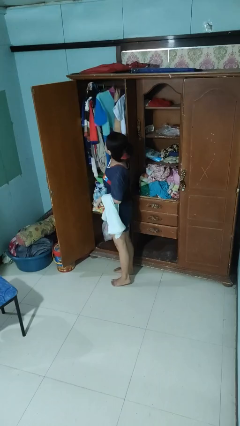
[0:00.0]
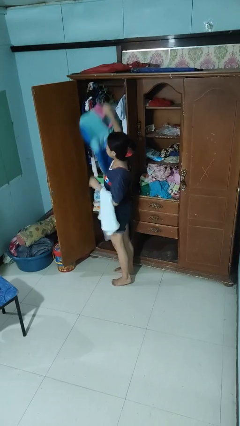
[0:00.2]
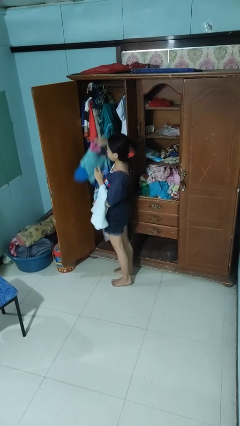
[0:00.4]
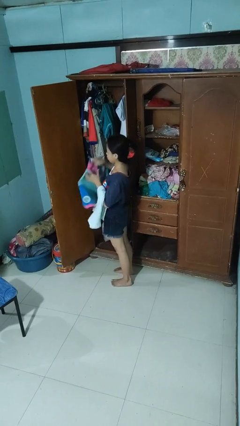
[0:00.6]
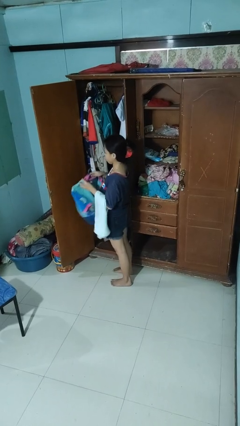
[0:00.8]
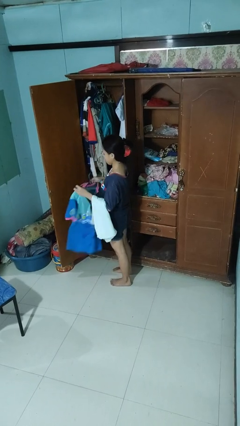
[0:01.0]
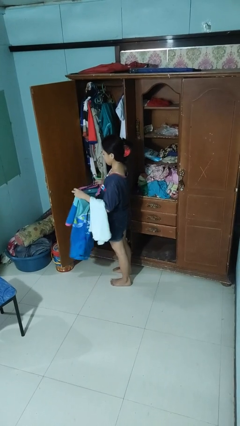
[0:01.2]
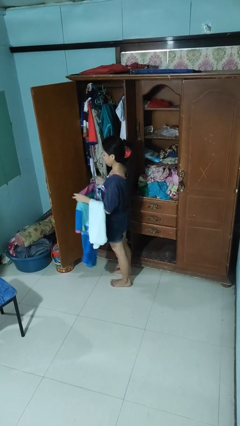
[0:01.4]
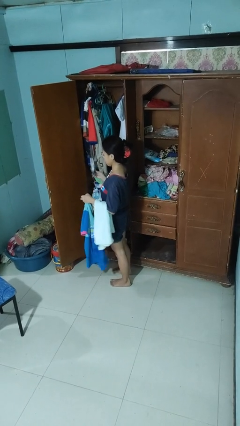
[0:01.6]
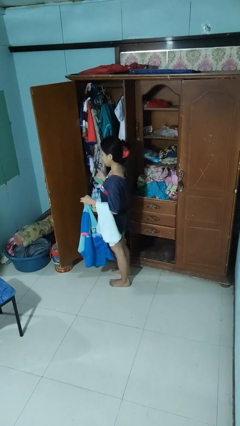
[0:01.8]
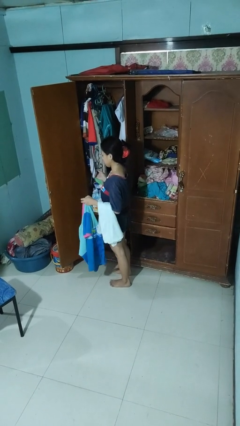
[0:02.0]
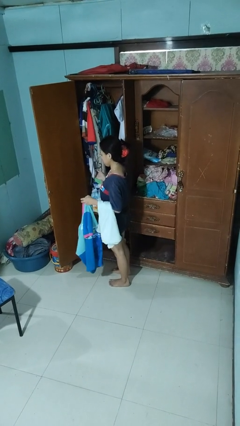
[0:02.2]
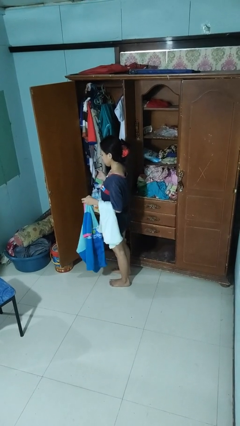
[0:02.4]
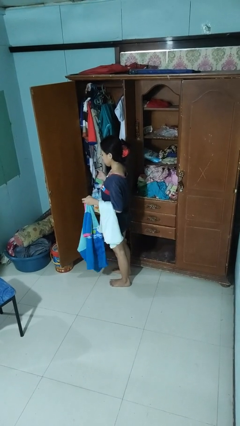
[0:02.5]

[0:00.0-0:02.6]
person takes clothes from closet

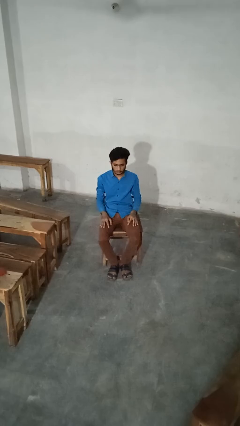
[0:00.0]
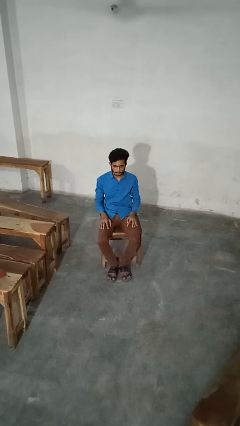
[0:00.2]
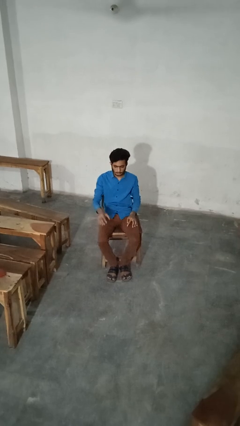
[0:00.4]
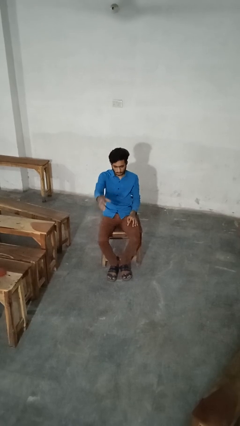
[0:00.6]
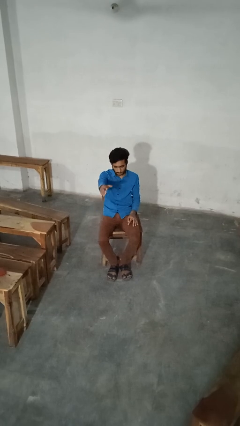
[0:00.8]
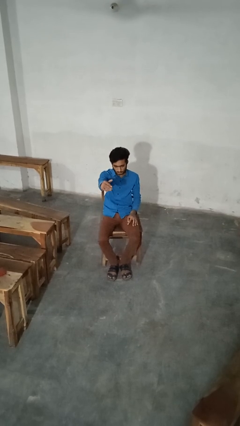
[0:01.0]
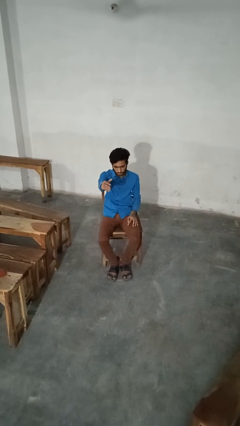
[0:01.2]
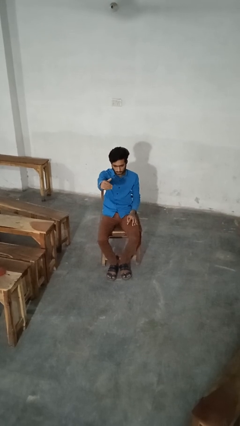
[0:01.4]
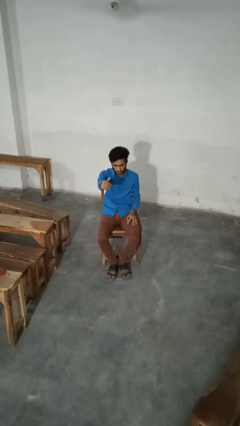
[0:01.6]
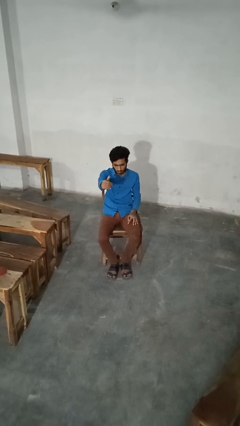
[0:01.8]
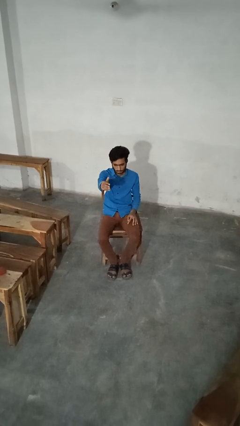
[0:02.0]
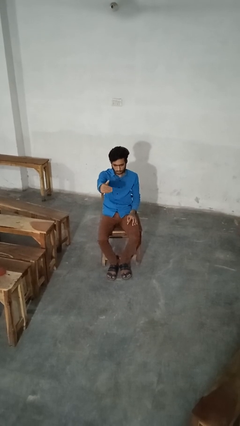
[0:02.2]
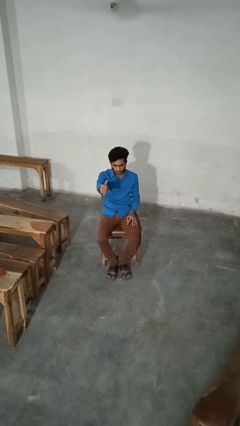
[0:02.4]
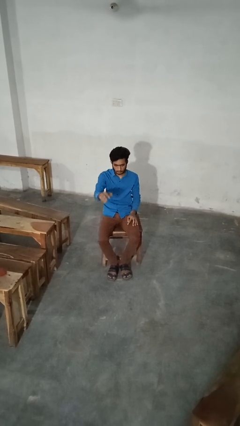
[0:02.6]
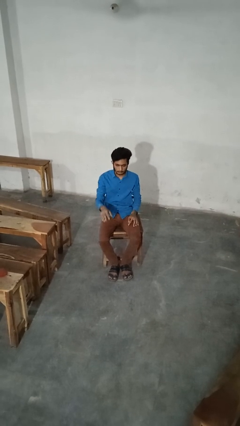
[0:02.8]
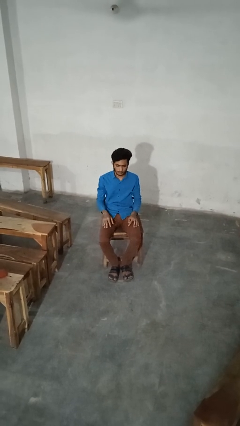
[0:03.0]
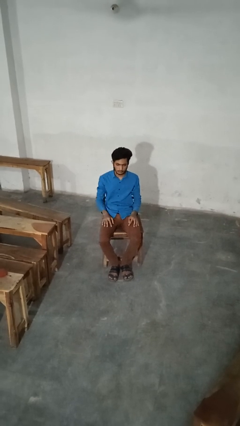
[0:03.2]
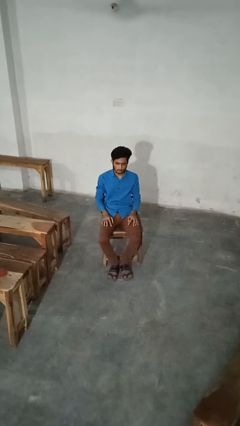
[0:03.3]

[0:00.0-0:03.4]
person gestures come here

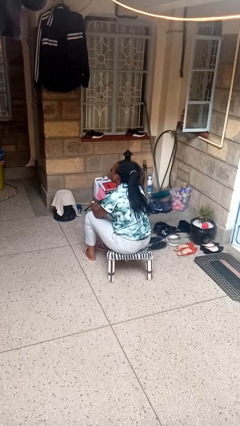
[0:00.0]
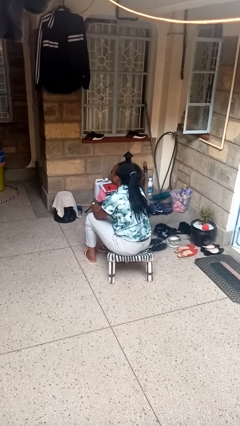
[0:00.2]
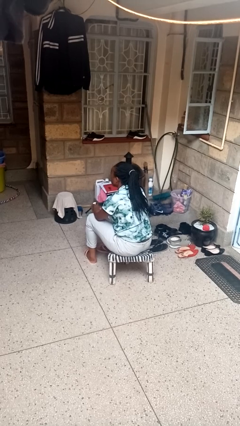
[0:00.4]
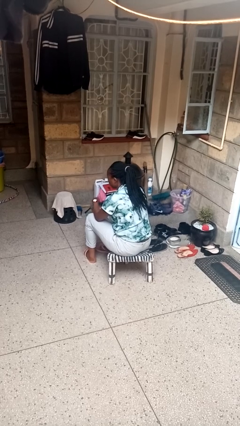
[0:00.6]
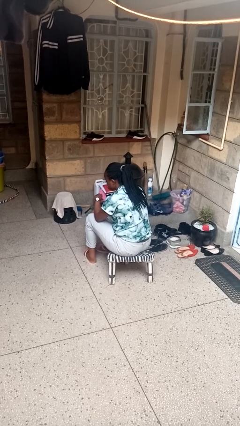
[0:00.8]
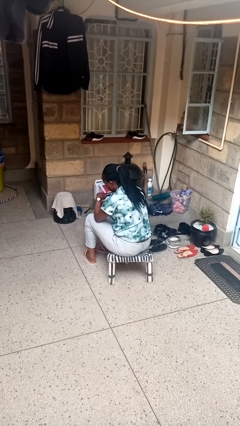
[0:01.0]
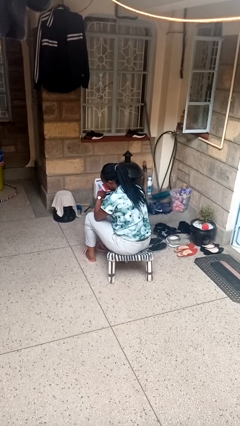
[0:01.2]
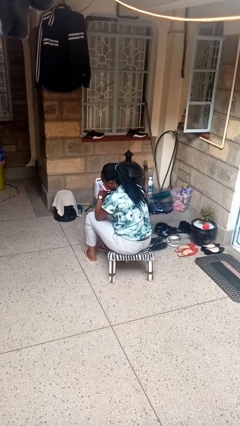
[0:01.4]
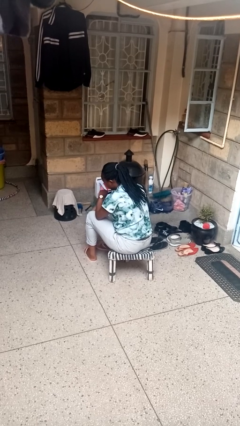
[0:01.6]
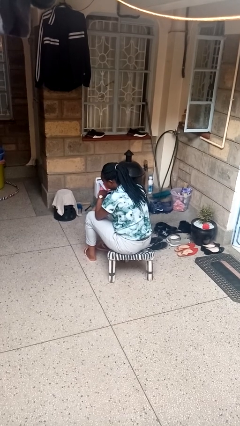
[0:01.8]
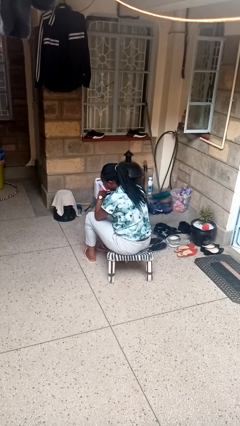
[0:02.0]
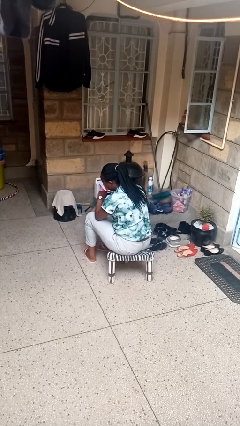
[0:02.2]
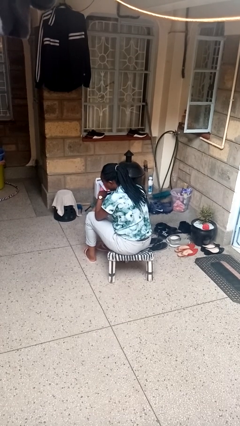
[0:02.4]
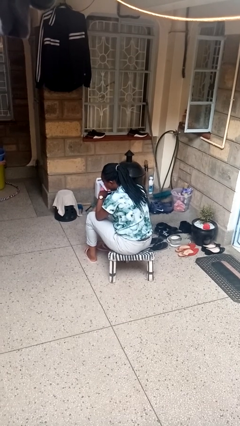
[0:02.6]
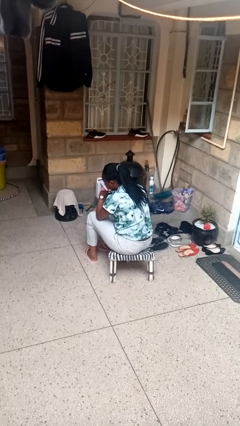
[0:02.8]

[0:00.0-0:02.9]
person looks at wristwatch

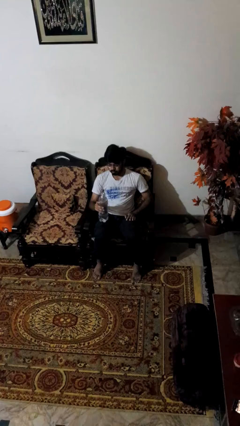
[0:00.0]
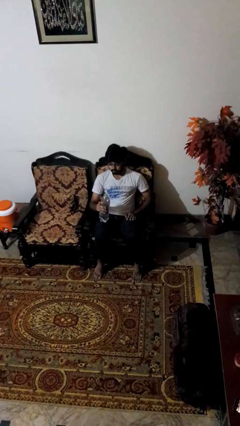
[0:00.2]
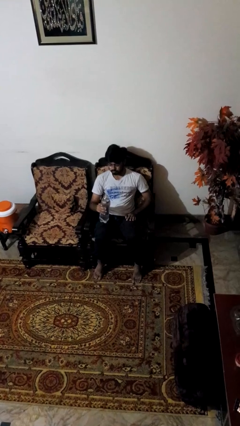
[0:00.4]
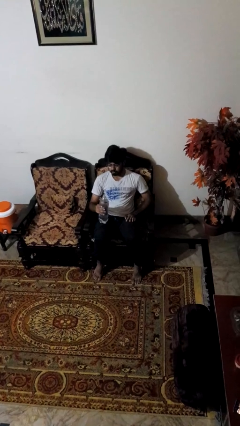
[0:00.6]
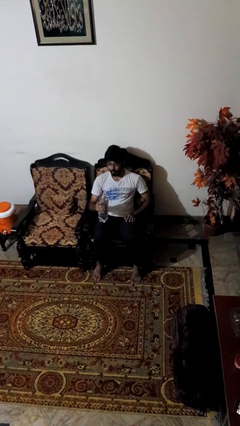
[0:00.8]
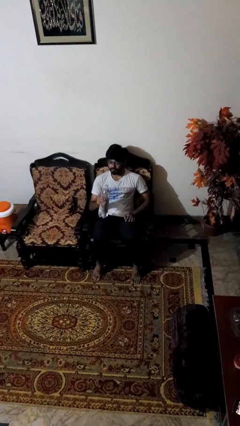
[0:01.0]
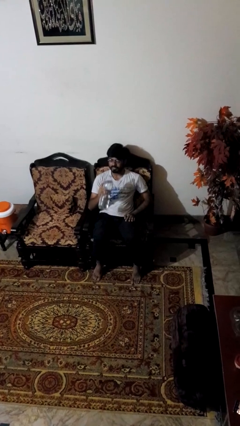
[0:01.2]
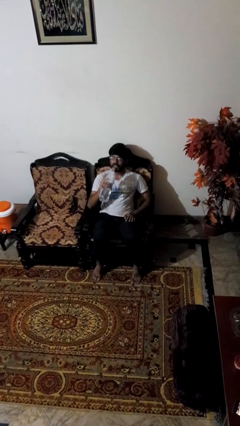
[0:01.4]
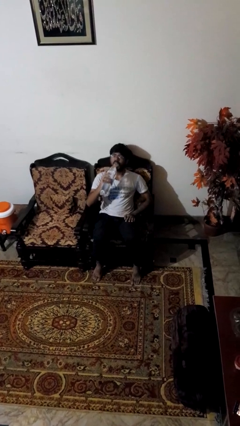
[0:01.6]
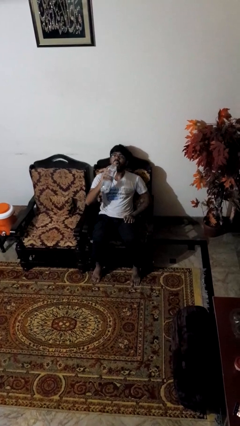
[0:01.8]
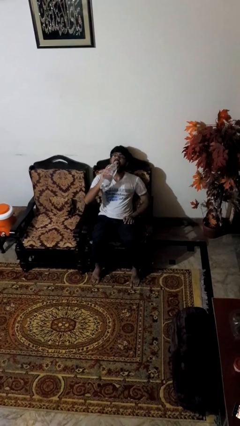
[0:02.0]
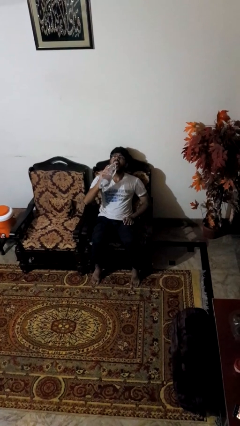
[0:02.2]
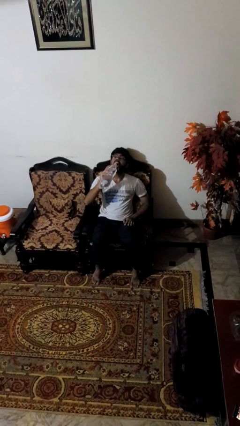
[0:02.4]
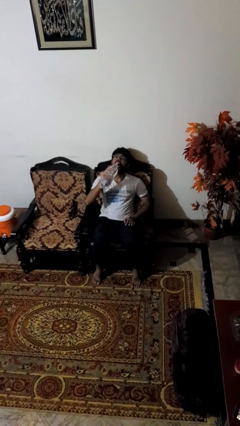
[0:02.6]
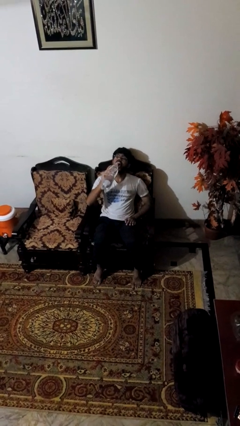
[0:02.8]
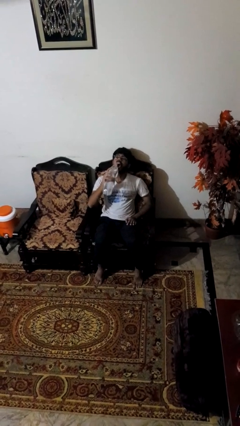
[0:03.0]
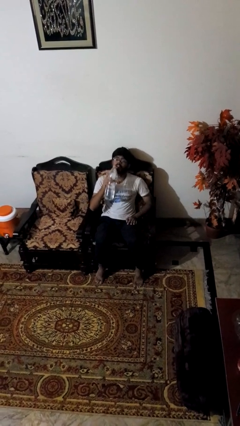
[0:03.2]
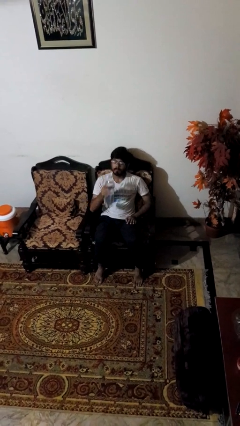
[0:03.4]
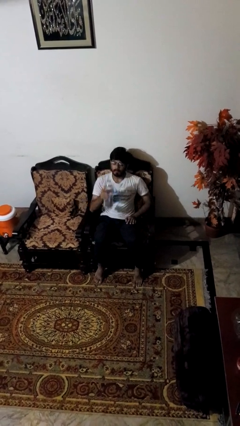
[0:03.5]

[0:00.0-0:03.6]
person drinks from bottle

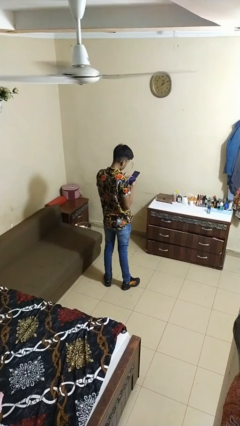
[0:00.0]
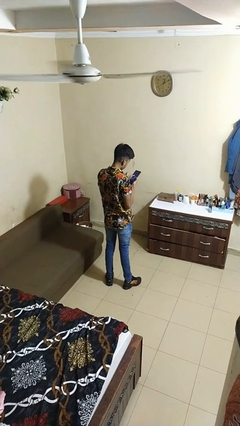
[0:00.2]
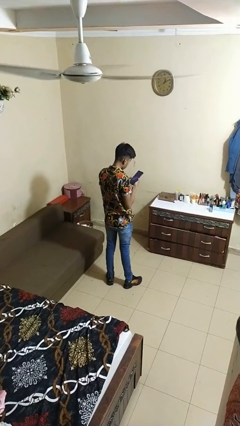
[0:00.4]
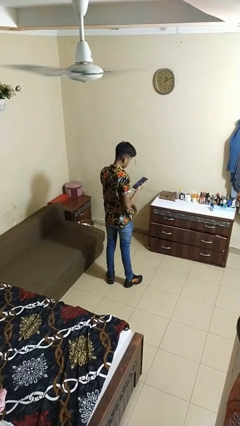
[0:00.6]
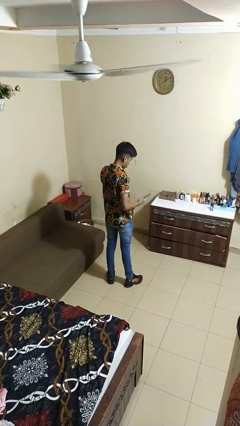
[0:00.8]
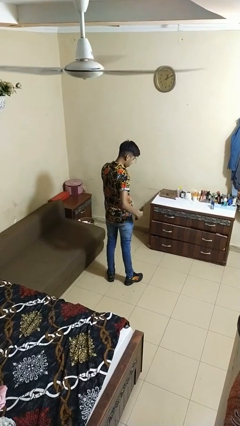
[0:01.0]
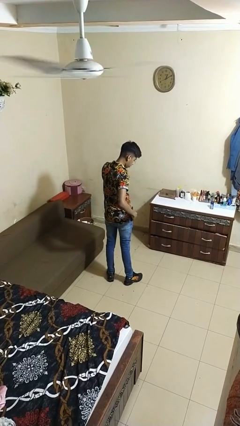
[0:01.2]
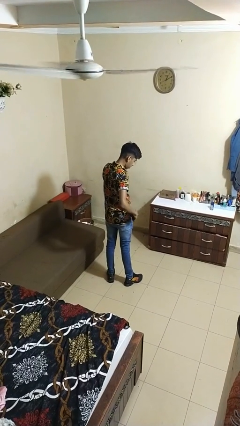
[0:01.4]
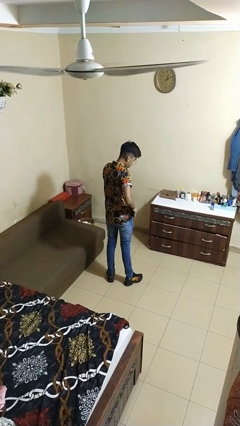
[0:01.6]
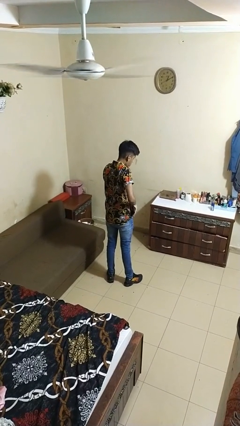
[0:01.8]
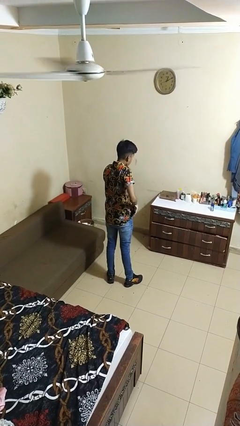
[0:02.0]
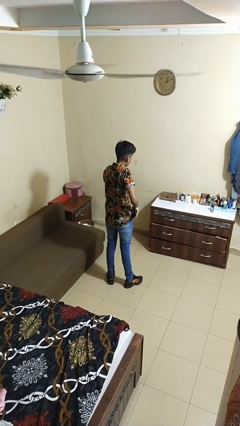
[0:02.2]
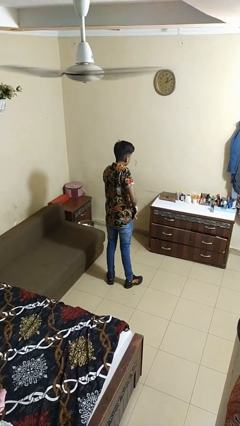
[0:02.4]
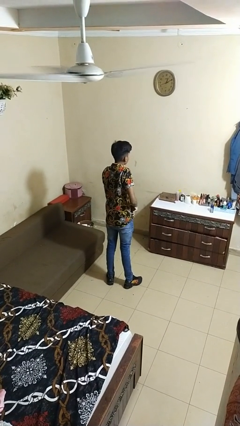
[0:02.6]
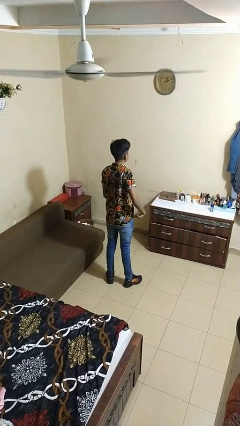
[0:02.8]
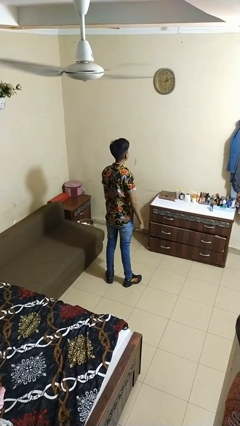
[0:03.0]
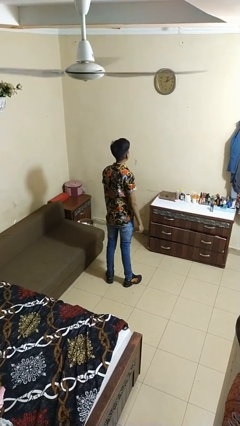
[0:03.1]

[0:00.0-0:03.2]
person puts phone into pocket

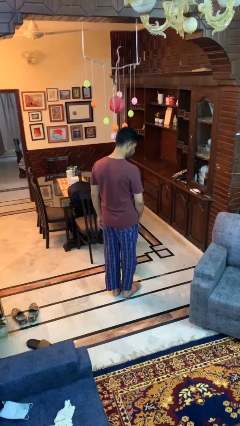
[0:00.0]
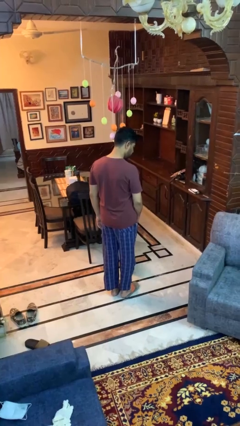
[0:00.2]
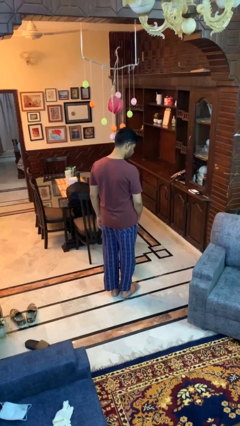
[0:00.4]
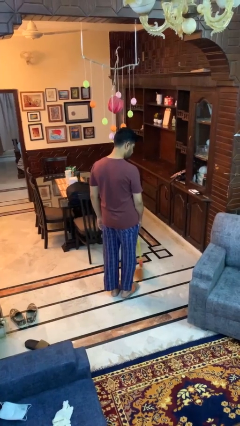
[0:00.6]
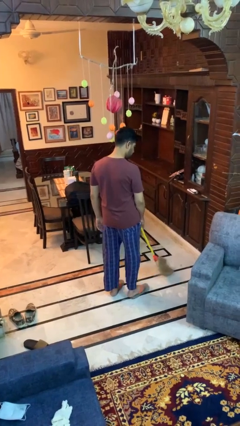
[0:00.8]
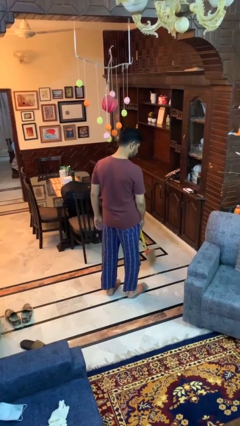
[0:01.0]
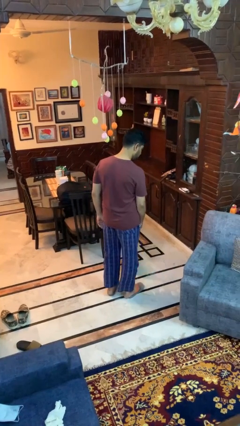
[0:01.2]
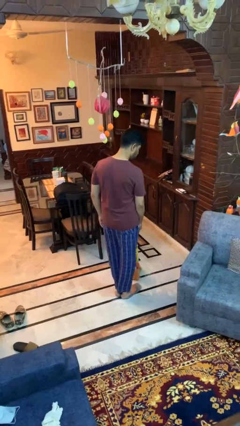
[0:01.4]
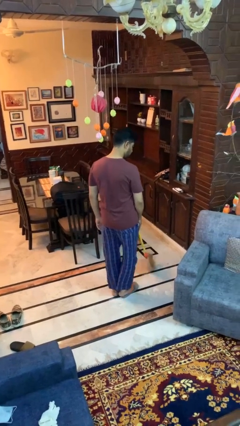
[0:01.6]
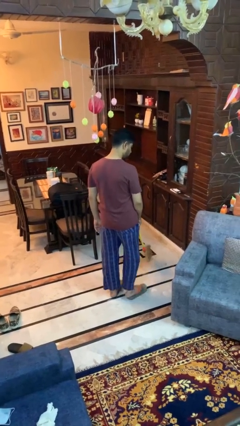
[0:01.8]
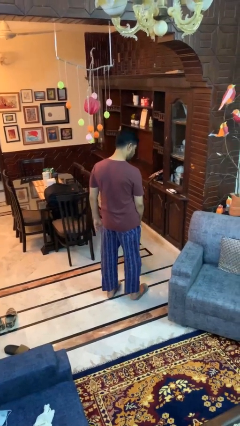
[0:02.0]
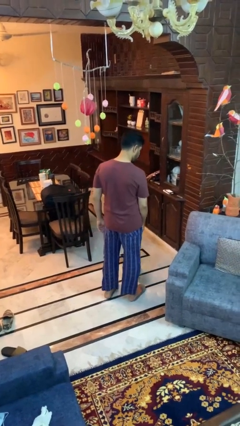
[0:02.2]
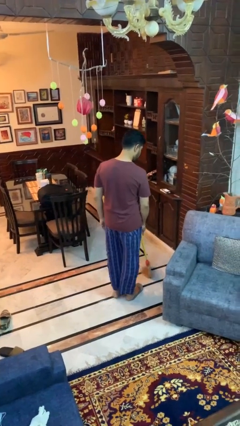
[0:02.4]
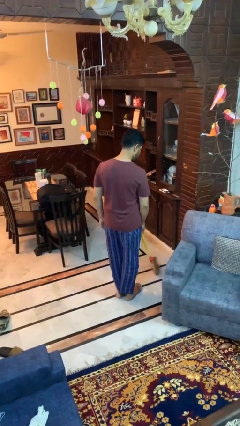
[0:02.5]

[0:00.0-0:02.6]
person sweeps floor
